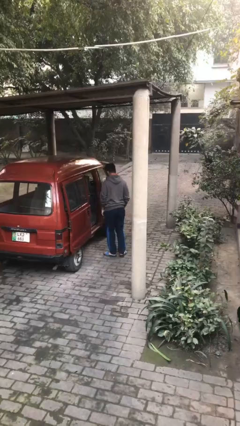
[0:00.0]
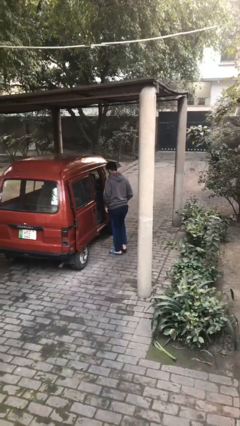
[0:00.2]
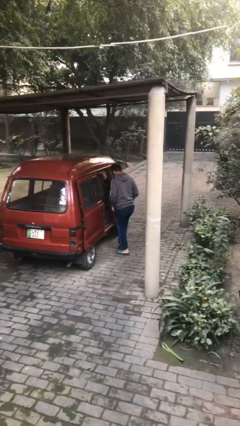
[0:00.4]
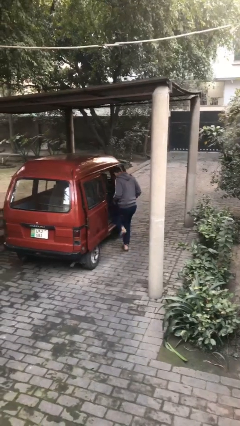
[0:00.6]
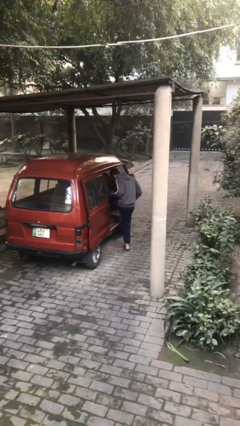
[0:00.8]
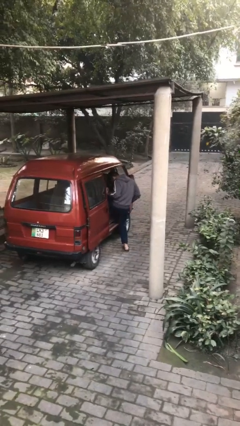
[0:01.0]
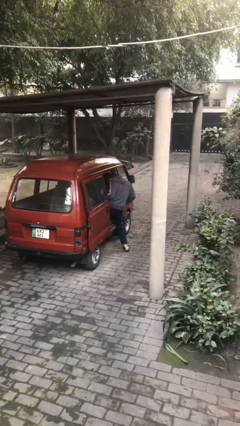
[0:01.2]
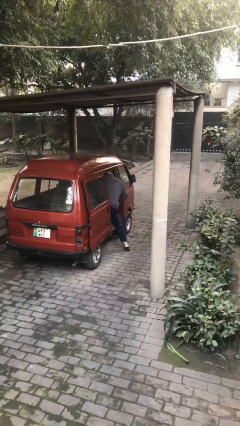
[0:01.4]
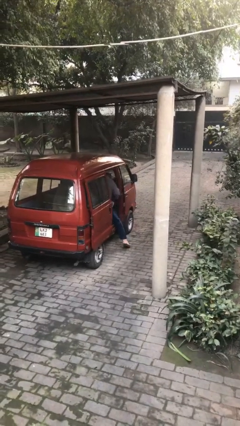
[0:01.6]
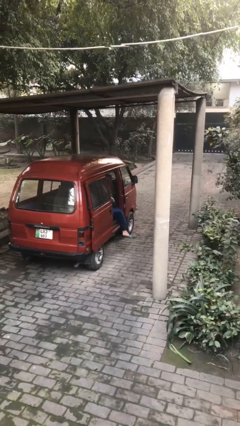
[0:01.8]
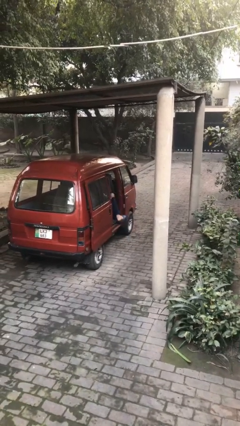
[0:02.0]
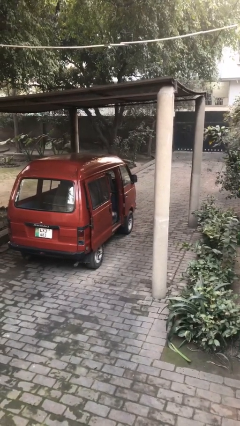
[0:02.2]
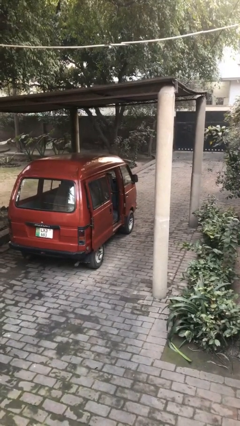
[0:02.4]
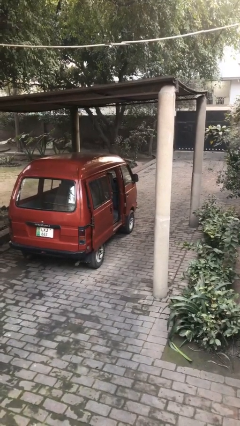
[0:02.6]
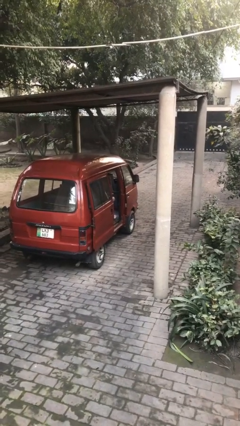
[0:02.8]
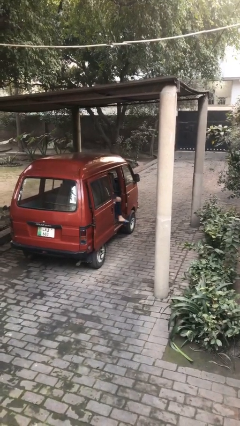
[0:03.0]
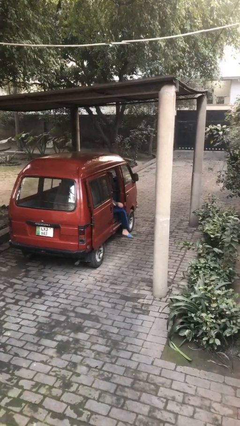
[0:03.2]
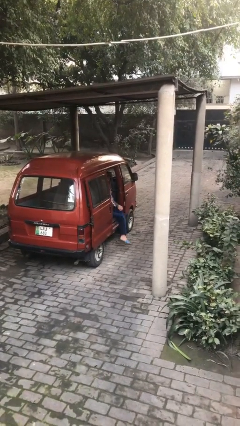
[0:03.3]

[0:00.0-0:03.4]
person enters car

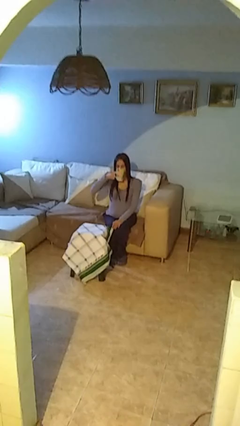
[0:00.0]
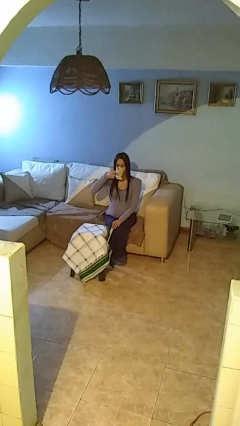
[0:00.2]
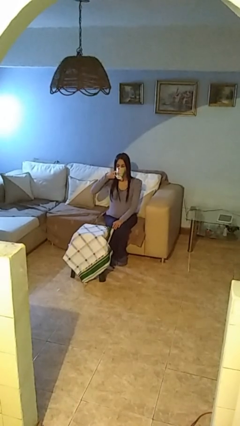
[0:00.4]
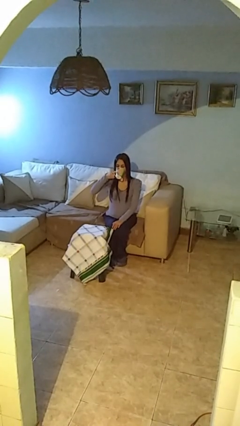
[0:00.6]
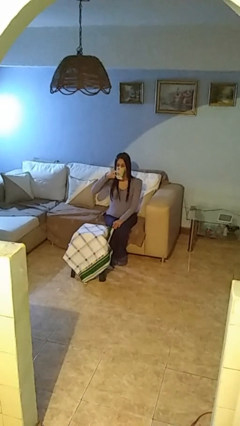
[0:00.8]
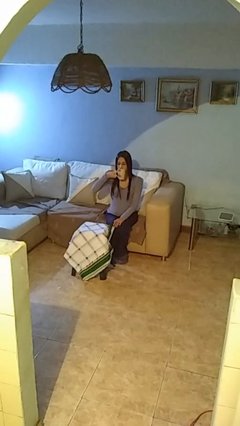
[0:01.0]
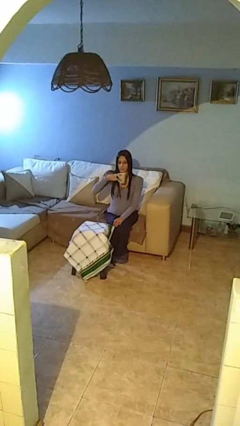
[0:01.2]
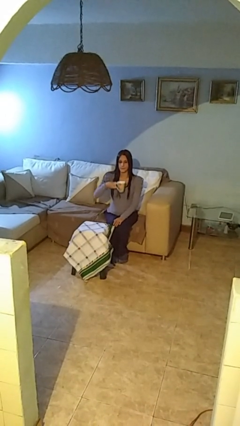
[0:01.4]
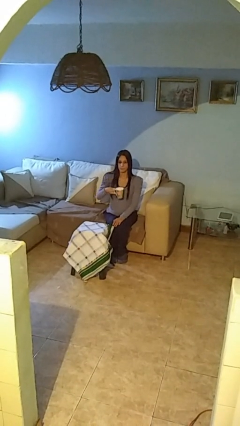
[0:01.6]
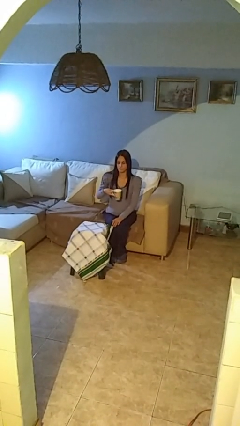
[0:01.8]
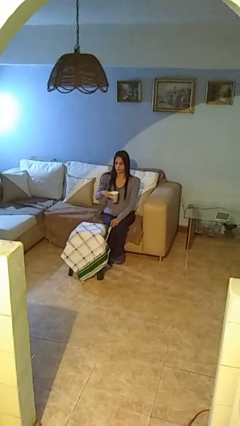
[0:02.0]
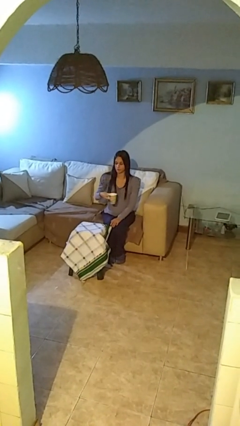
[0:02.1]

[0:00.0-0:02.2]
person drinks from mug

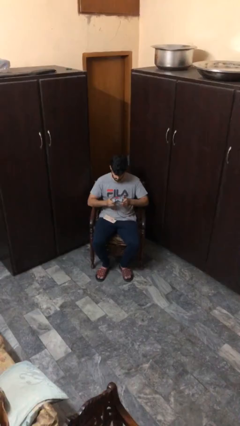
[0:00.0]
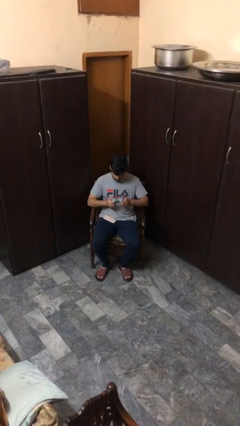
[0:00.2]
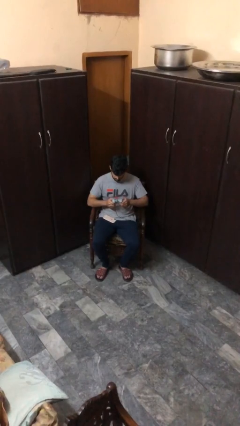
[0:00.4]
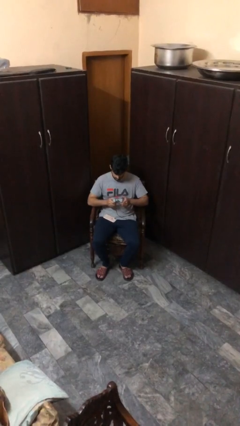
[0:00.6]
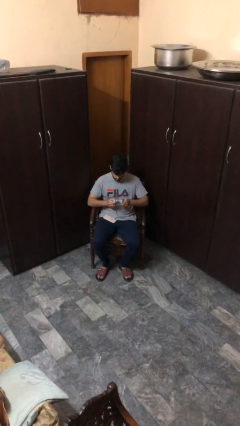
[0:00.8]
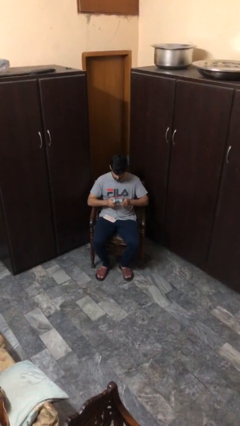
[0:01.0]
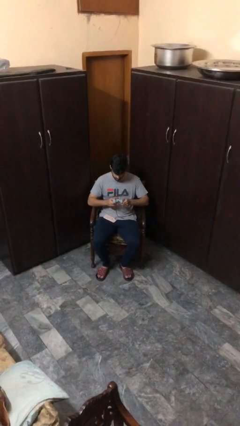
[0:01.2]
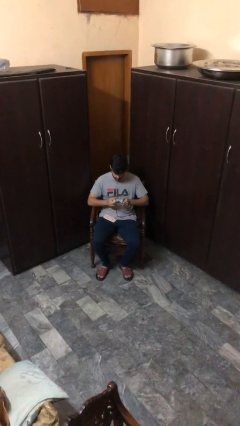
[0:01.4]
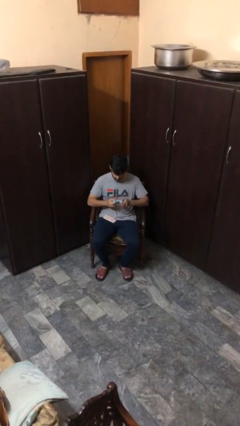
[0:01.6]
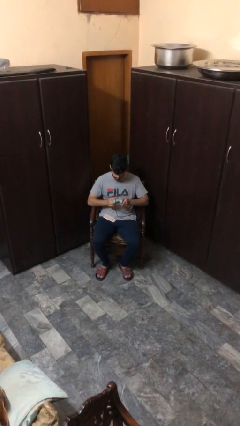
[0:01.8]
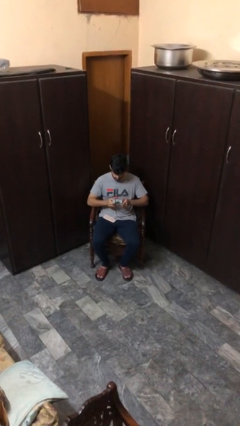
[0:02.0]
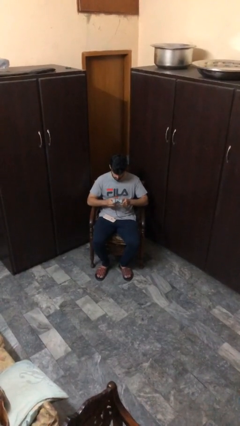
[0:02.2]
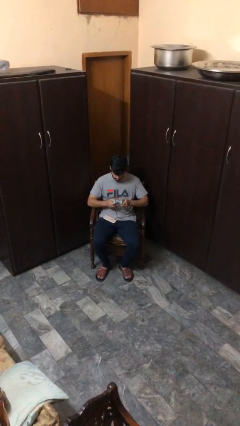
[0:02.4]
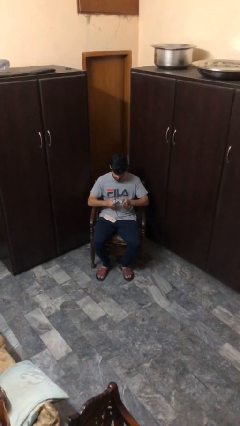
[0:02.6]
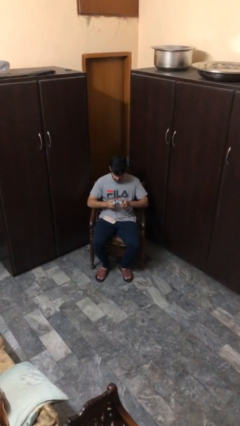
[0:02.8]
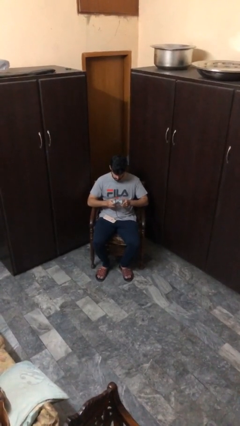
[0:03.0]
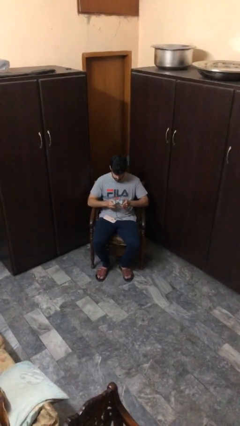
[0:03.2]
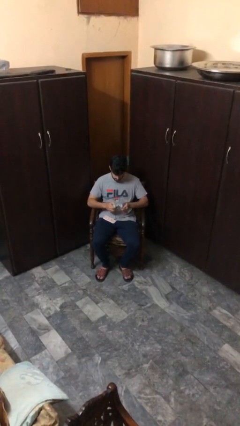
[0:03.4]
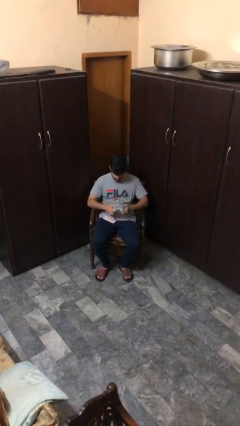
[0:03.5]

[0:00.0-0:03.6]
person interacts with handheld game

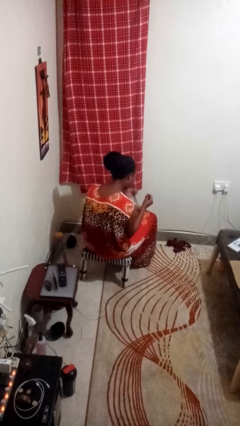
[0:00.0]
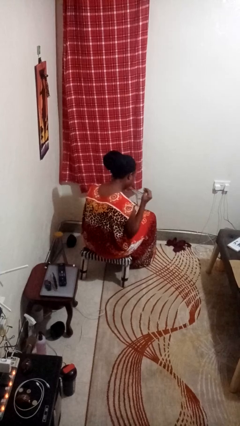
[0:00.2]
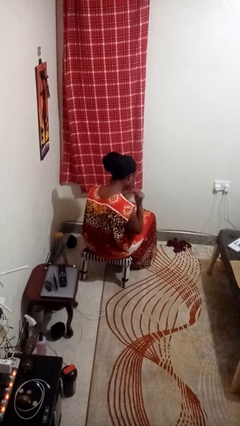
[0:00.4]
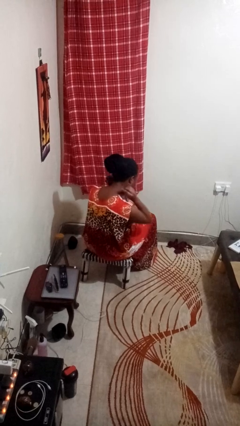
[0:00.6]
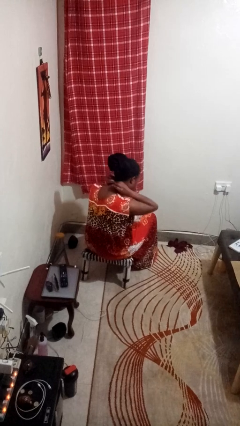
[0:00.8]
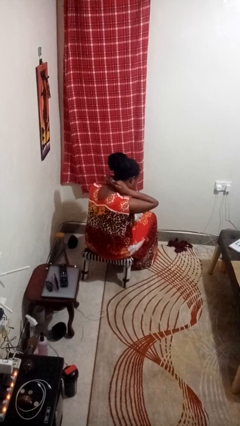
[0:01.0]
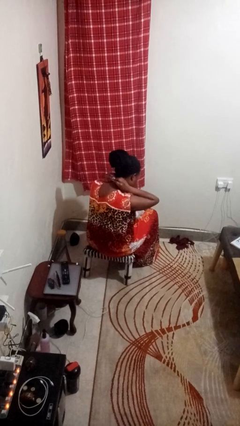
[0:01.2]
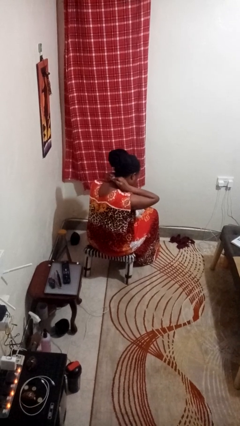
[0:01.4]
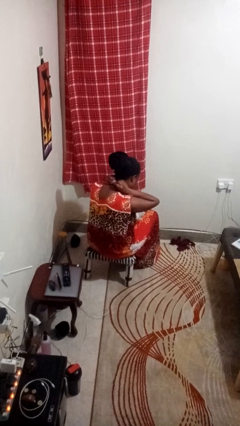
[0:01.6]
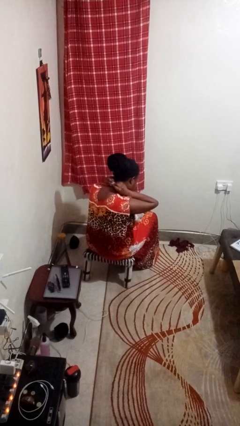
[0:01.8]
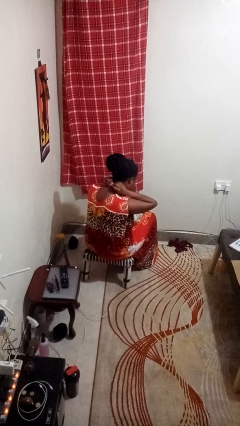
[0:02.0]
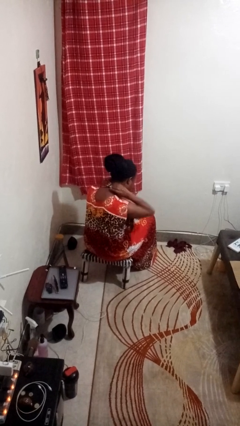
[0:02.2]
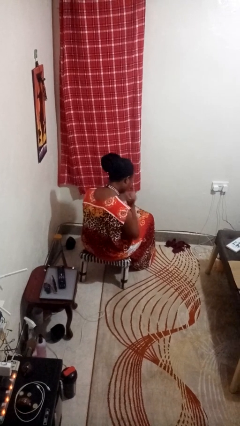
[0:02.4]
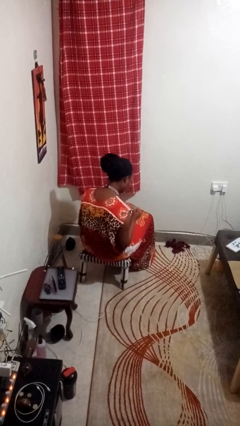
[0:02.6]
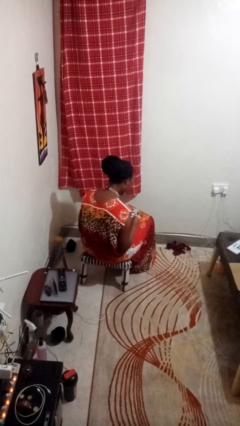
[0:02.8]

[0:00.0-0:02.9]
person puts on necklace

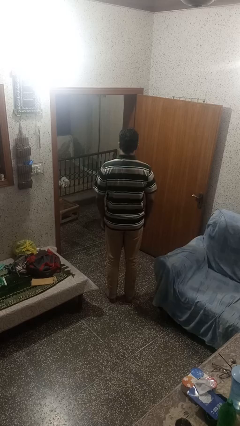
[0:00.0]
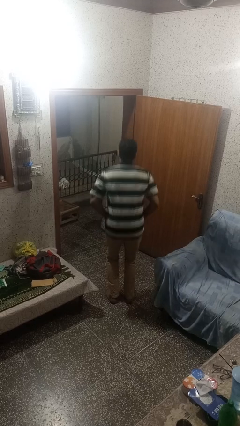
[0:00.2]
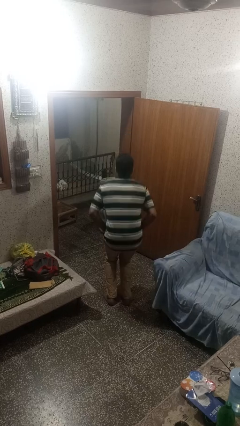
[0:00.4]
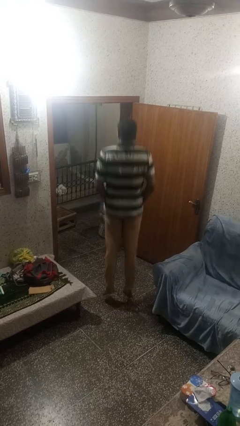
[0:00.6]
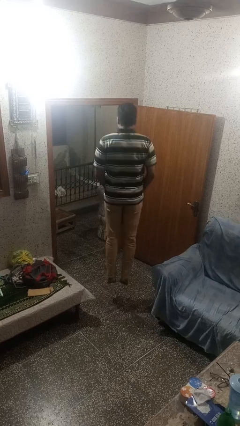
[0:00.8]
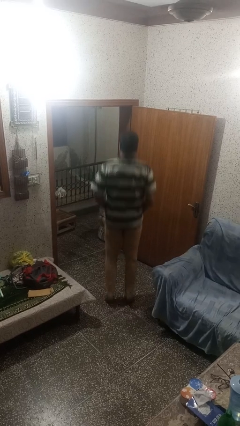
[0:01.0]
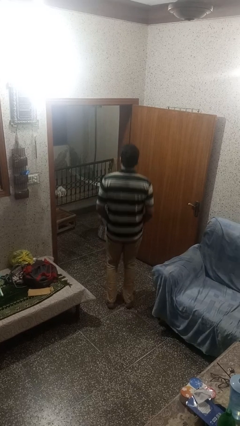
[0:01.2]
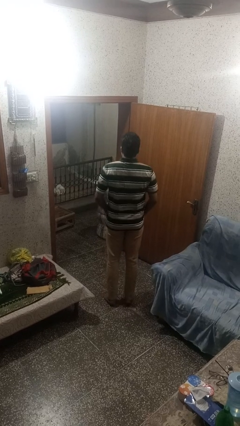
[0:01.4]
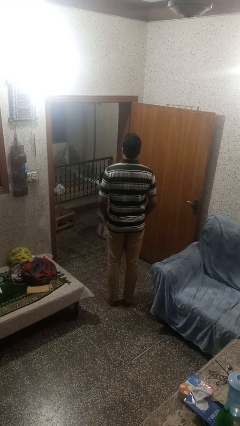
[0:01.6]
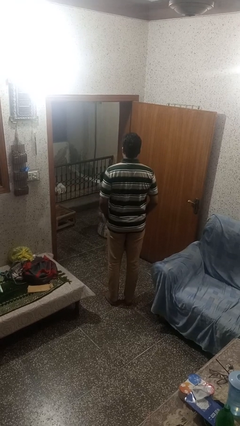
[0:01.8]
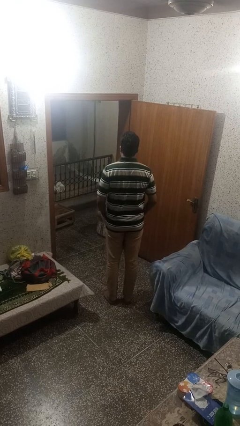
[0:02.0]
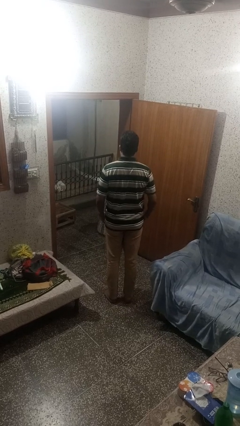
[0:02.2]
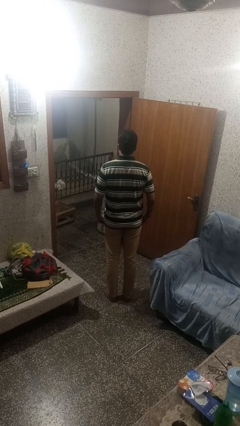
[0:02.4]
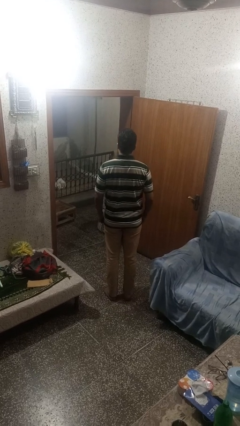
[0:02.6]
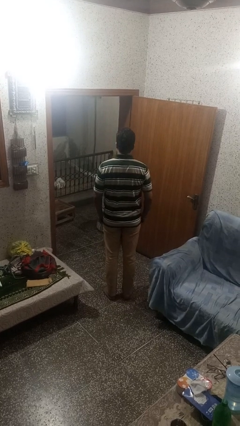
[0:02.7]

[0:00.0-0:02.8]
person jumps

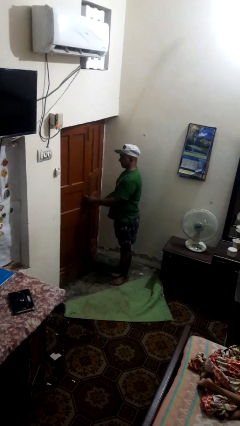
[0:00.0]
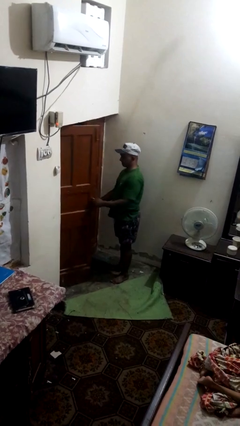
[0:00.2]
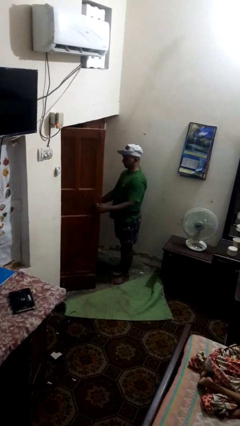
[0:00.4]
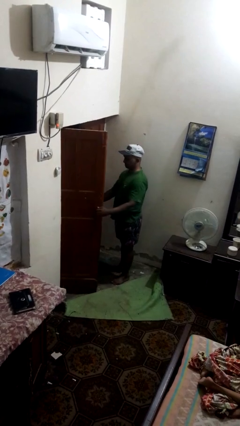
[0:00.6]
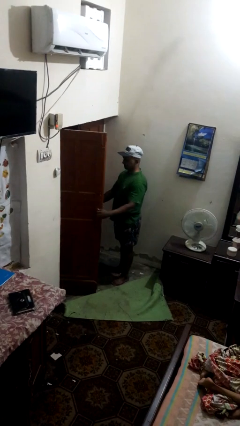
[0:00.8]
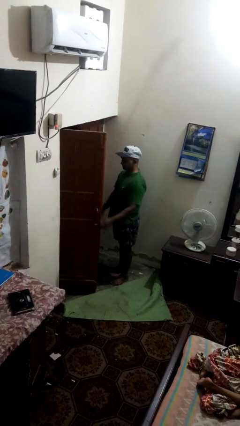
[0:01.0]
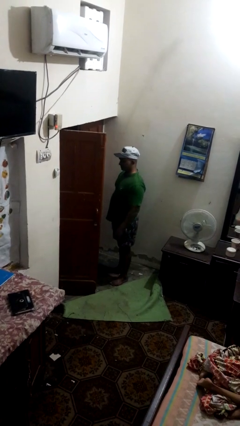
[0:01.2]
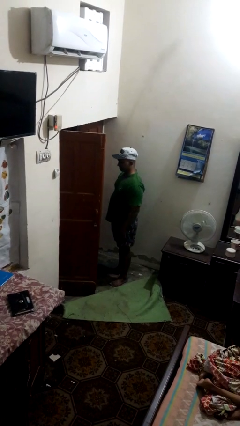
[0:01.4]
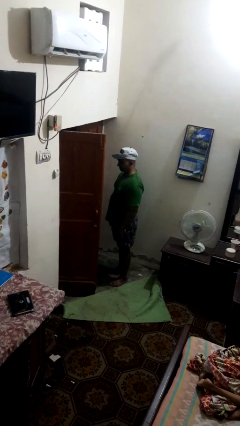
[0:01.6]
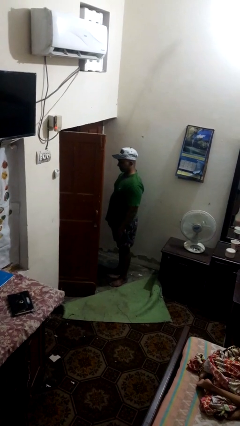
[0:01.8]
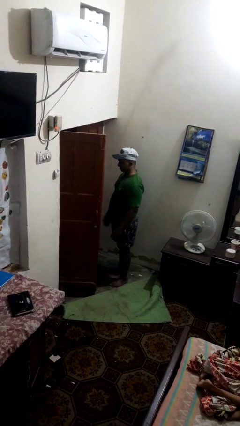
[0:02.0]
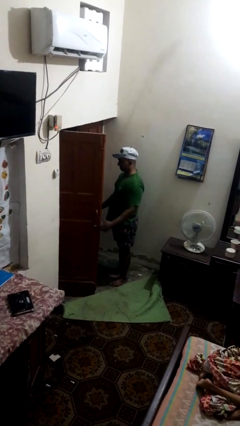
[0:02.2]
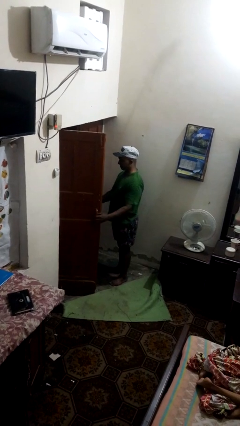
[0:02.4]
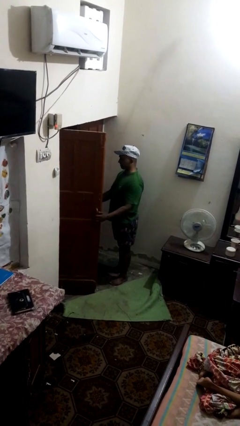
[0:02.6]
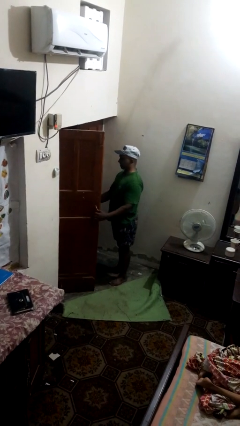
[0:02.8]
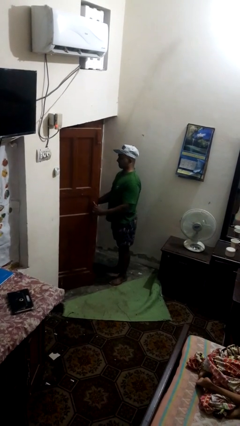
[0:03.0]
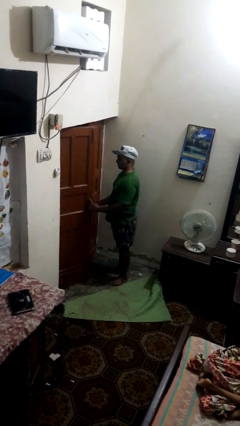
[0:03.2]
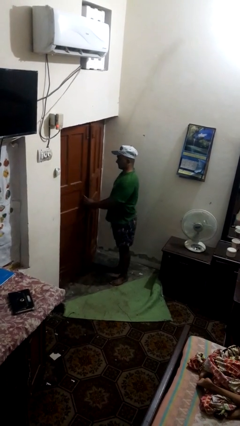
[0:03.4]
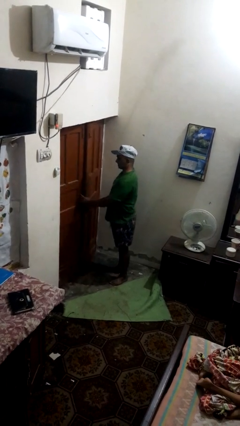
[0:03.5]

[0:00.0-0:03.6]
person opens facility door
